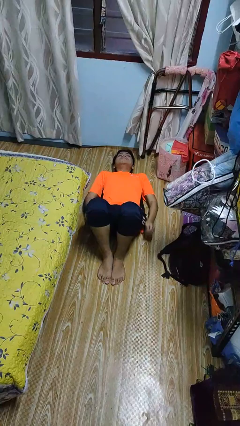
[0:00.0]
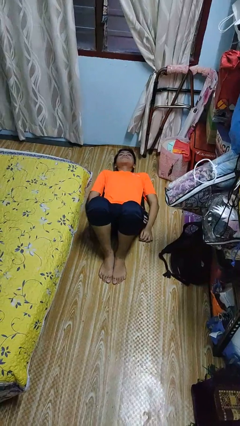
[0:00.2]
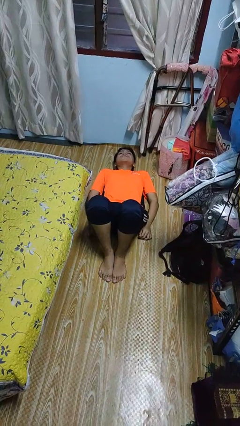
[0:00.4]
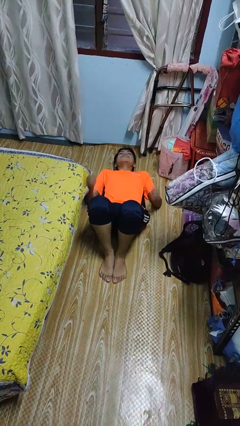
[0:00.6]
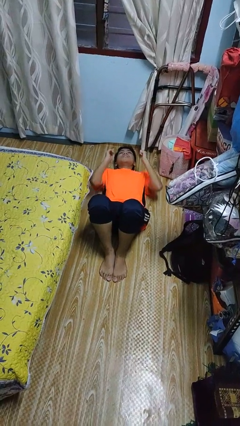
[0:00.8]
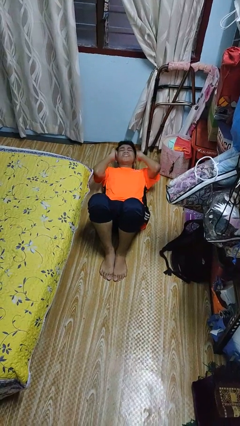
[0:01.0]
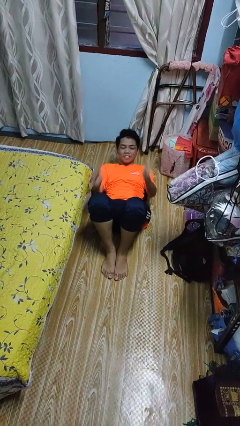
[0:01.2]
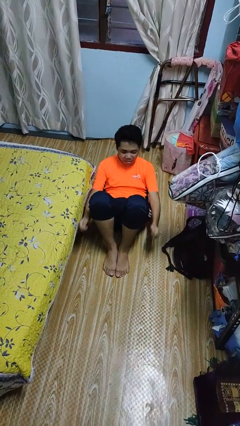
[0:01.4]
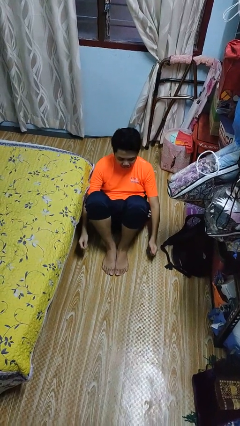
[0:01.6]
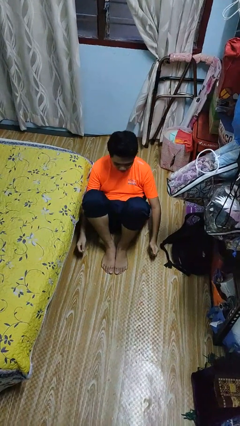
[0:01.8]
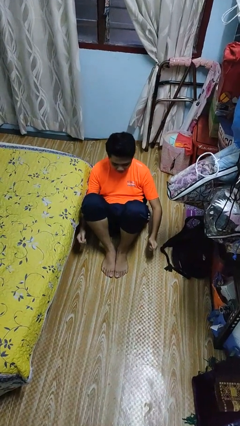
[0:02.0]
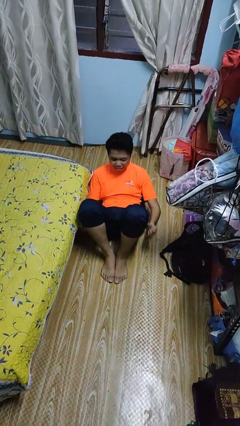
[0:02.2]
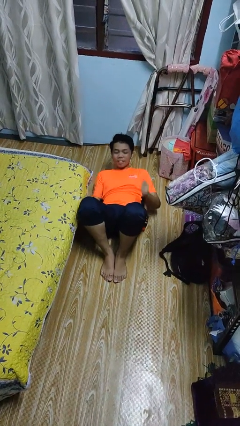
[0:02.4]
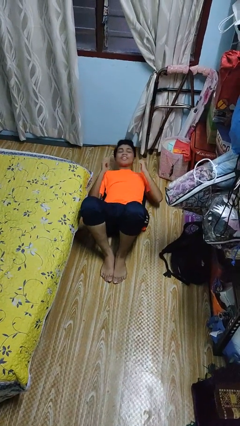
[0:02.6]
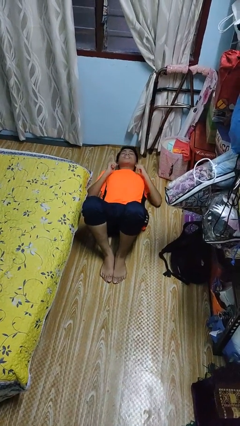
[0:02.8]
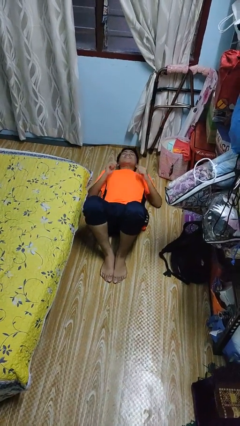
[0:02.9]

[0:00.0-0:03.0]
person exercises with situp

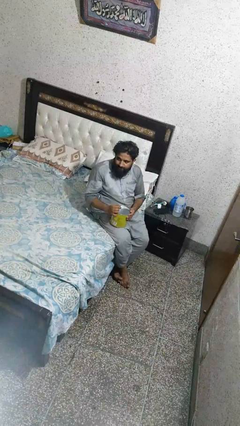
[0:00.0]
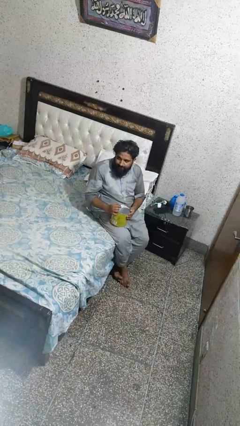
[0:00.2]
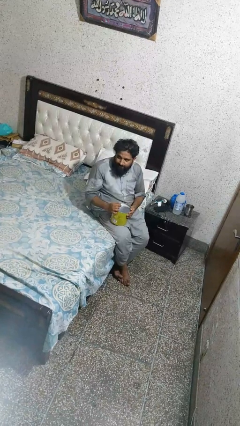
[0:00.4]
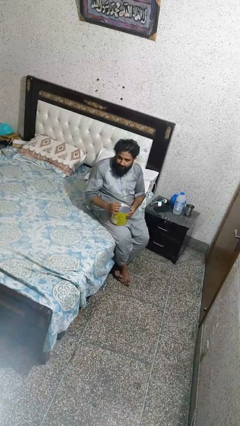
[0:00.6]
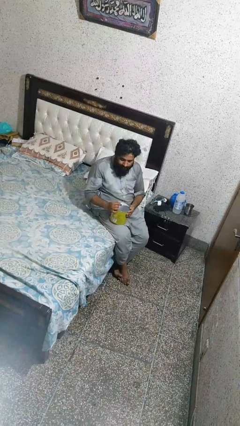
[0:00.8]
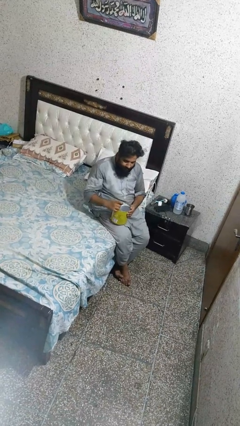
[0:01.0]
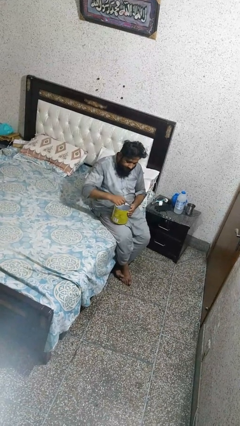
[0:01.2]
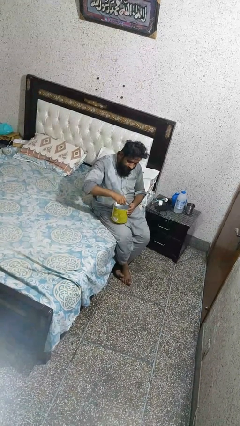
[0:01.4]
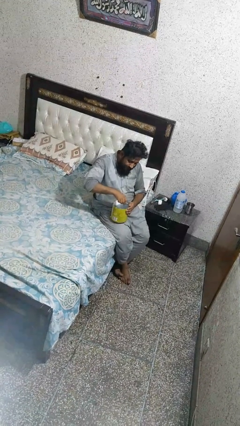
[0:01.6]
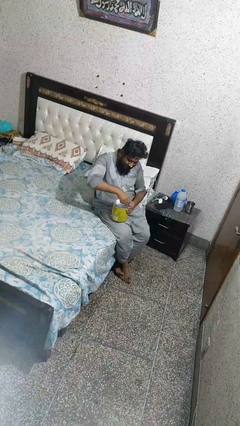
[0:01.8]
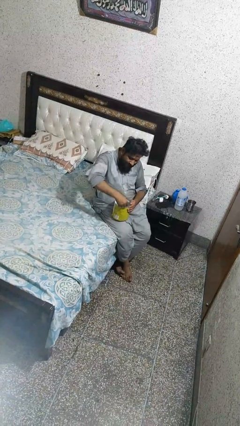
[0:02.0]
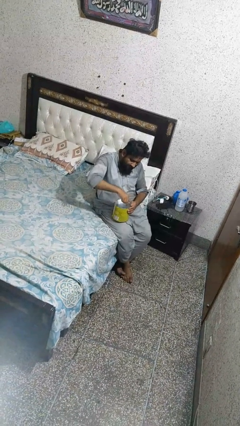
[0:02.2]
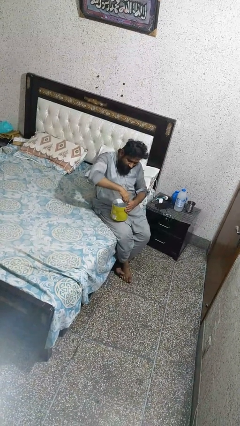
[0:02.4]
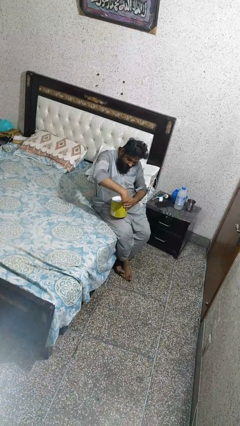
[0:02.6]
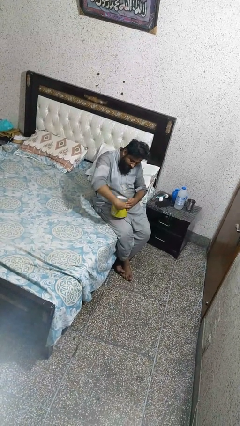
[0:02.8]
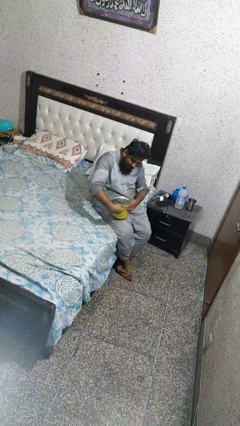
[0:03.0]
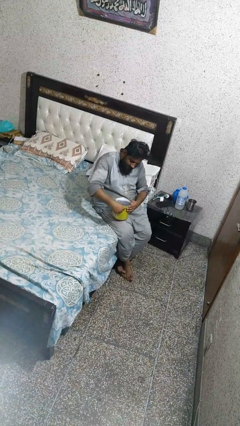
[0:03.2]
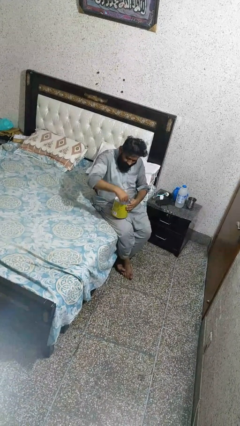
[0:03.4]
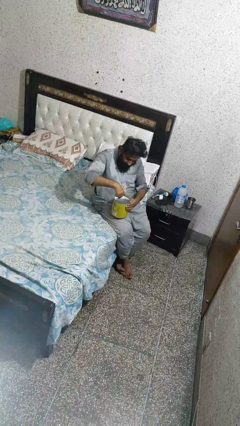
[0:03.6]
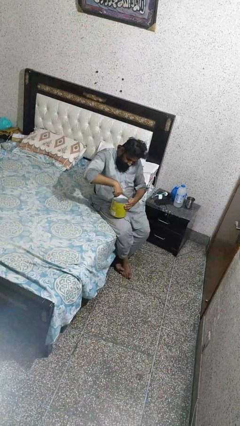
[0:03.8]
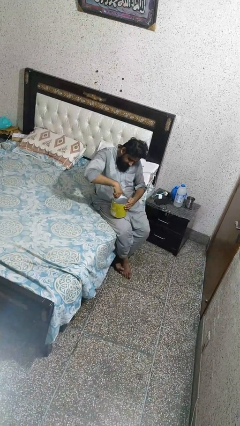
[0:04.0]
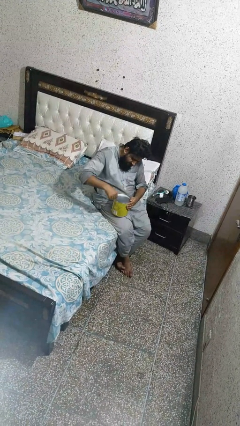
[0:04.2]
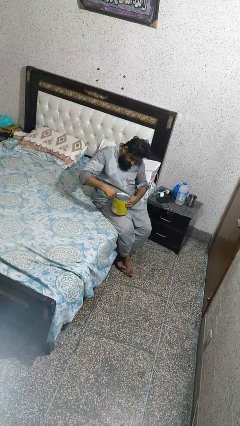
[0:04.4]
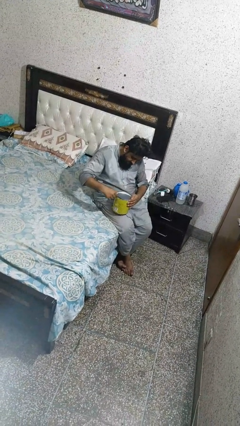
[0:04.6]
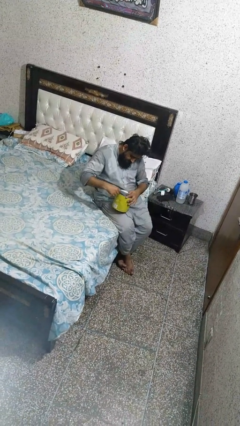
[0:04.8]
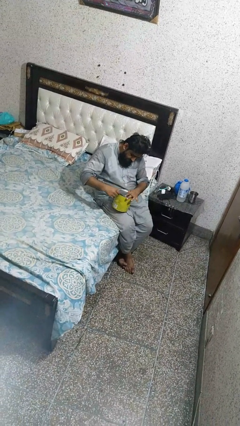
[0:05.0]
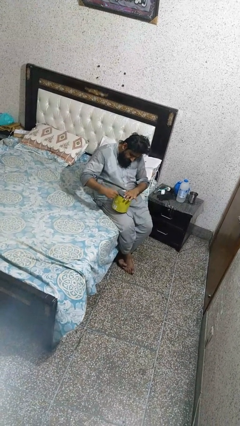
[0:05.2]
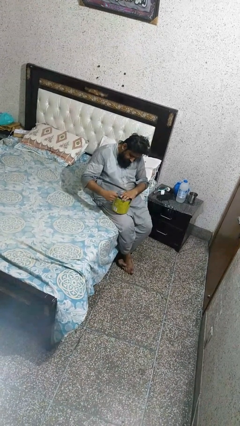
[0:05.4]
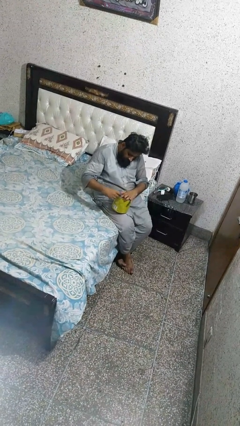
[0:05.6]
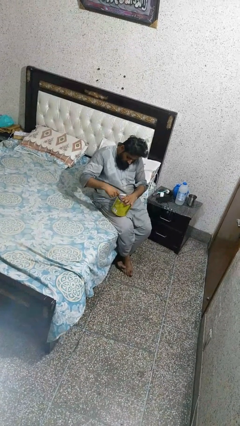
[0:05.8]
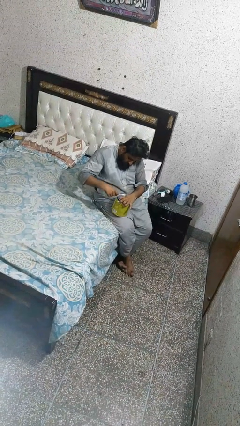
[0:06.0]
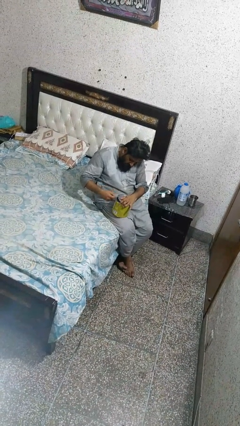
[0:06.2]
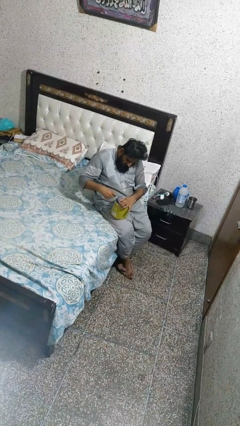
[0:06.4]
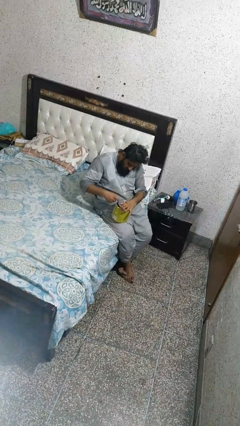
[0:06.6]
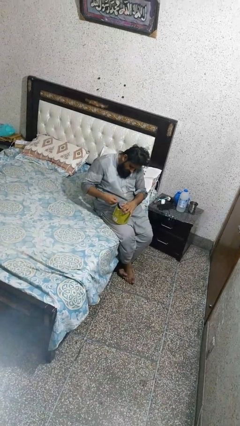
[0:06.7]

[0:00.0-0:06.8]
person opens can with can opener

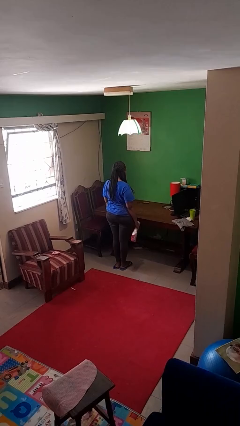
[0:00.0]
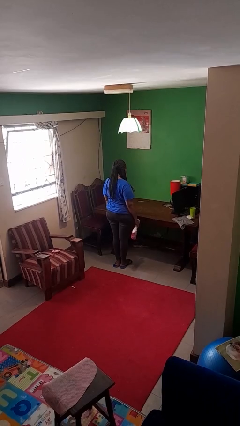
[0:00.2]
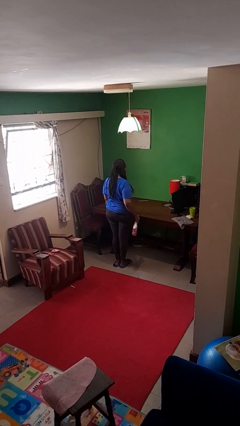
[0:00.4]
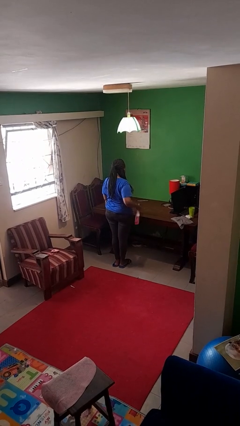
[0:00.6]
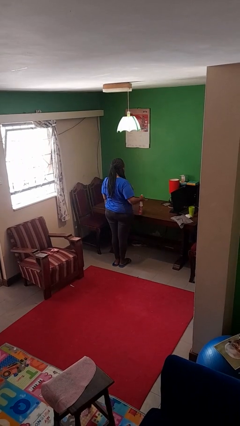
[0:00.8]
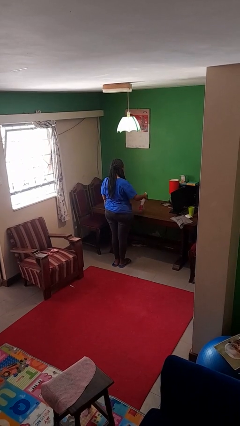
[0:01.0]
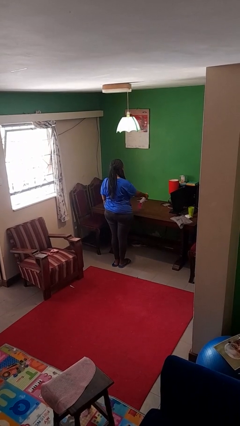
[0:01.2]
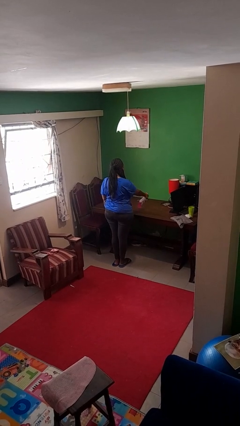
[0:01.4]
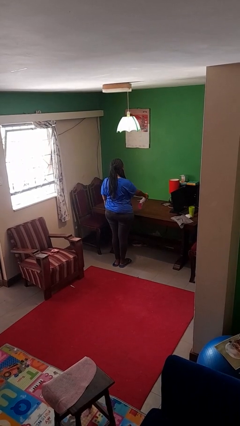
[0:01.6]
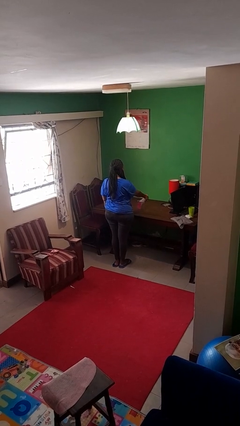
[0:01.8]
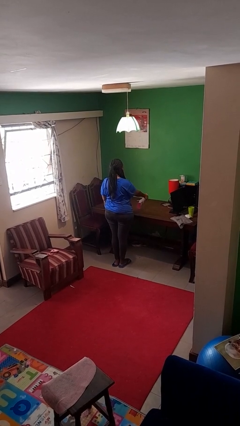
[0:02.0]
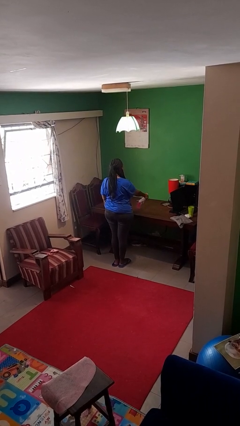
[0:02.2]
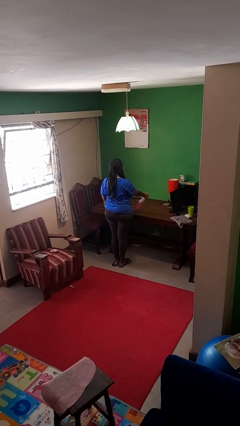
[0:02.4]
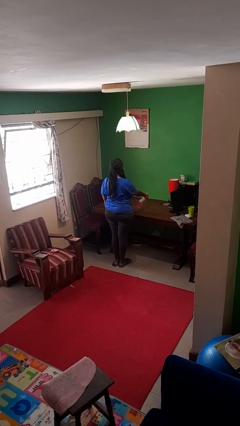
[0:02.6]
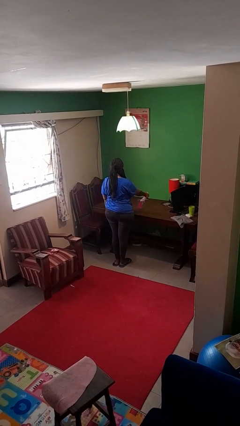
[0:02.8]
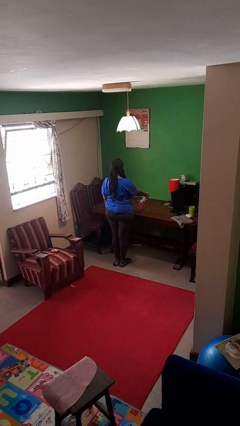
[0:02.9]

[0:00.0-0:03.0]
person sprays from bottle

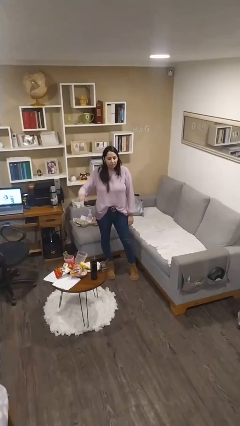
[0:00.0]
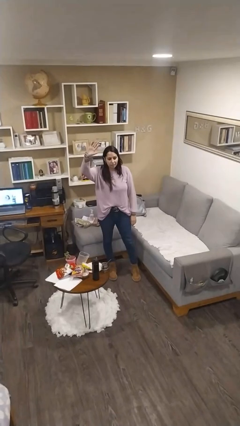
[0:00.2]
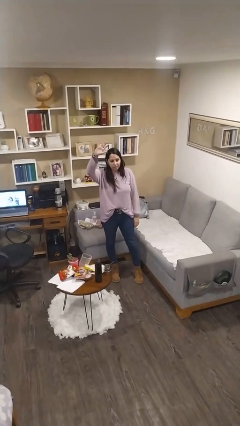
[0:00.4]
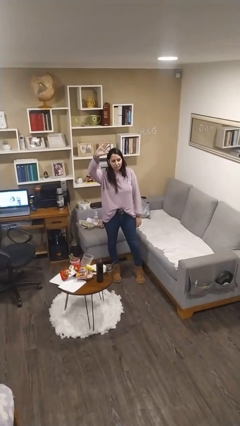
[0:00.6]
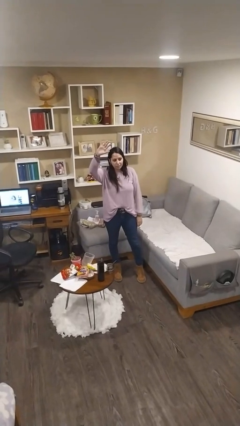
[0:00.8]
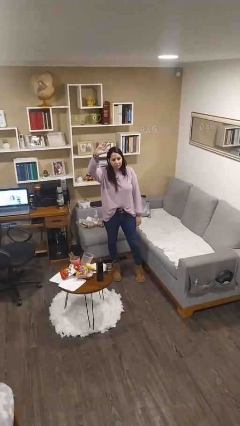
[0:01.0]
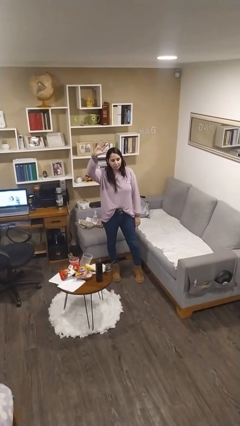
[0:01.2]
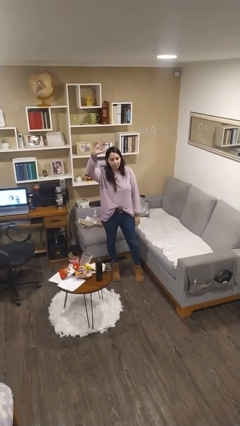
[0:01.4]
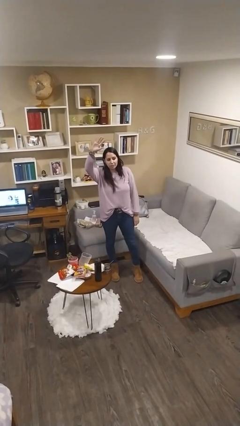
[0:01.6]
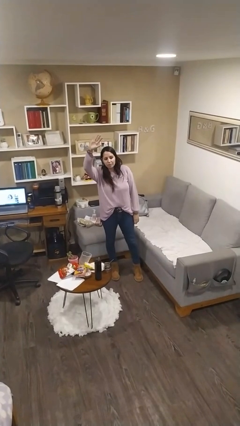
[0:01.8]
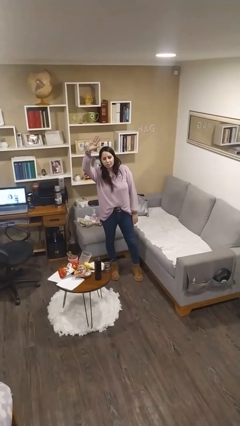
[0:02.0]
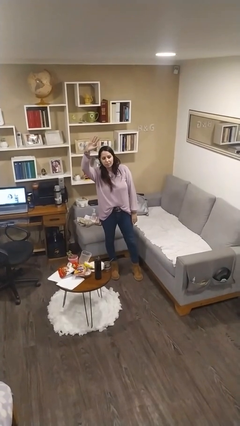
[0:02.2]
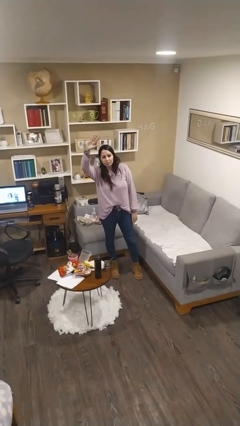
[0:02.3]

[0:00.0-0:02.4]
person gestures raise hand

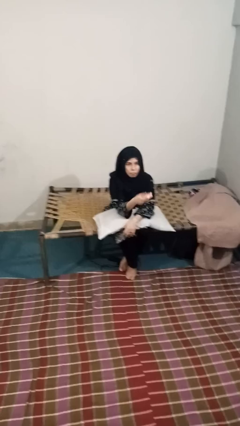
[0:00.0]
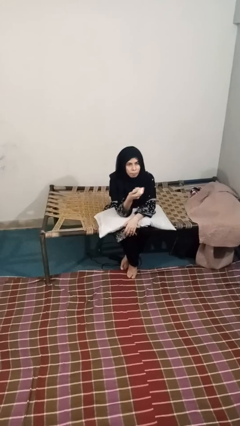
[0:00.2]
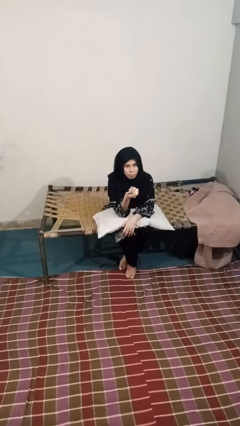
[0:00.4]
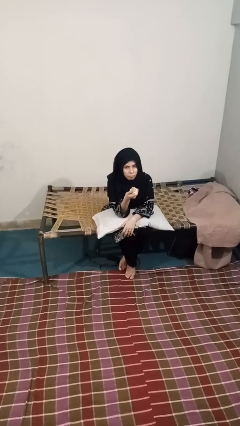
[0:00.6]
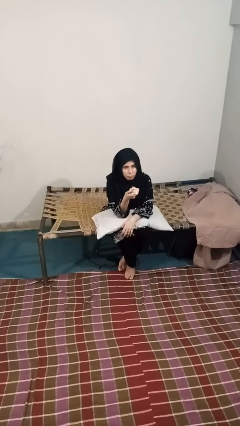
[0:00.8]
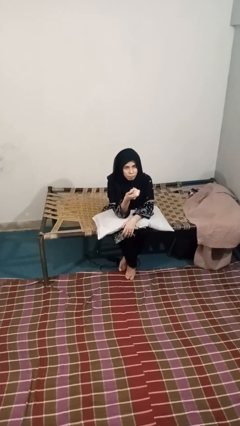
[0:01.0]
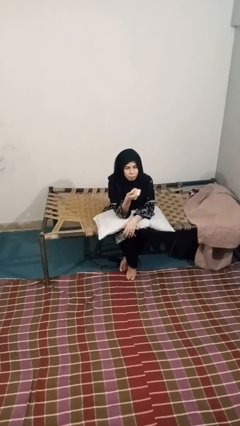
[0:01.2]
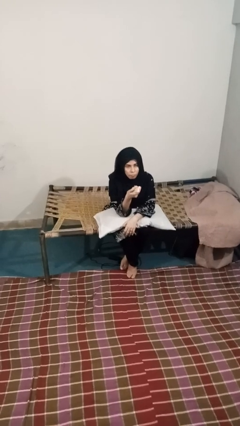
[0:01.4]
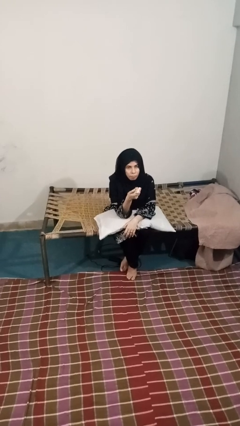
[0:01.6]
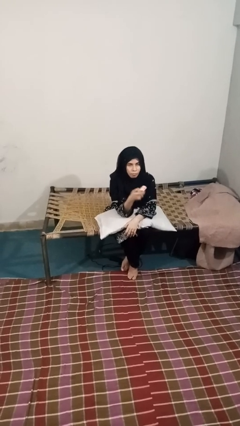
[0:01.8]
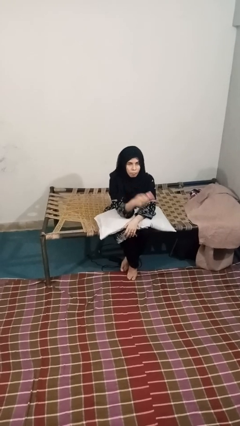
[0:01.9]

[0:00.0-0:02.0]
person uses television remote

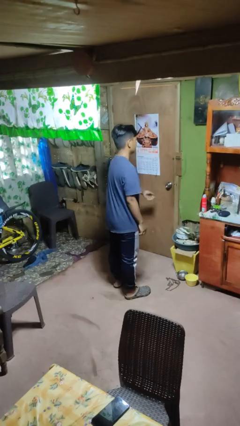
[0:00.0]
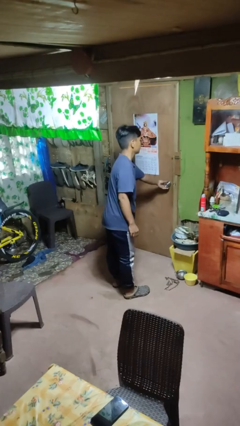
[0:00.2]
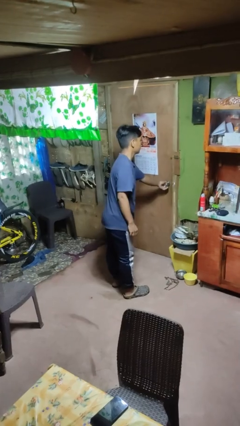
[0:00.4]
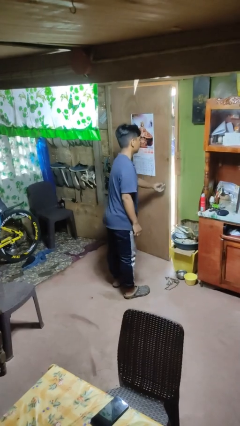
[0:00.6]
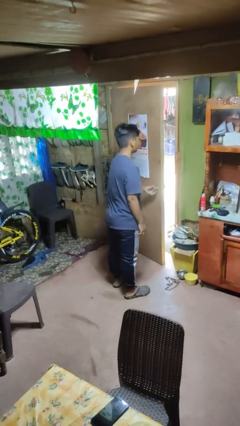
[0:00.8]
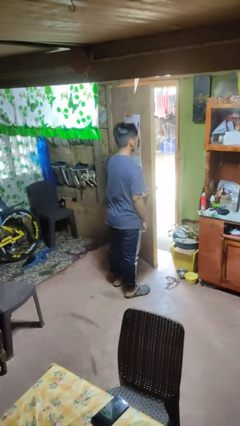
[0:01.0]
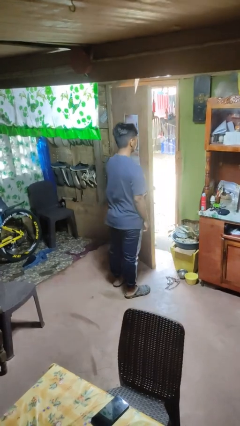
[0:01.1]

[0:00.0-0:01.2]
person opens facility door
